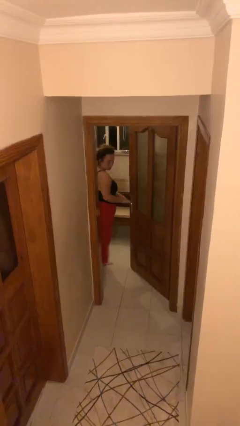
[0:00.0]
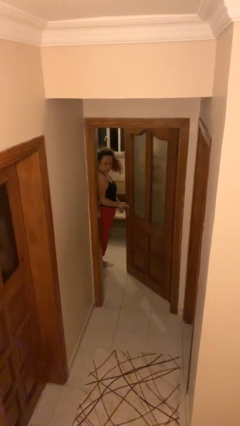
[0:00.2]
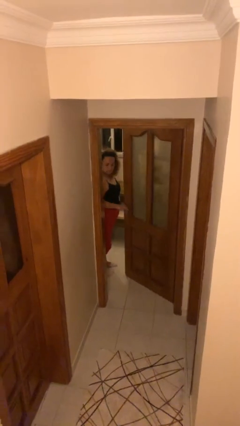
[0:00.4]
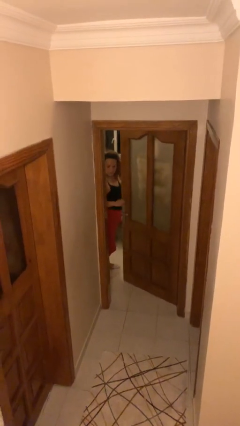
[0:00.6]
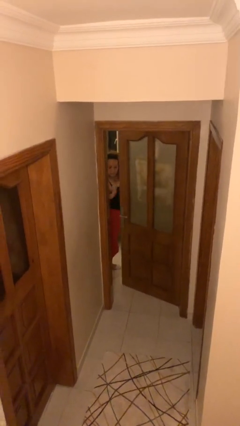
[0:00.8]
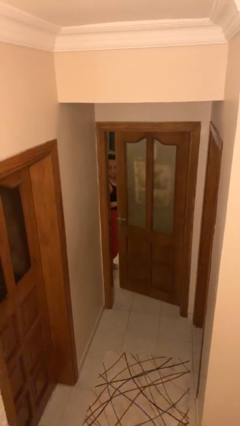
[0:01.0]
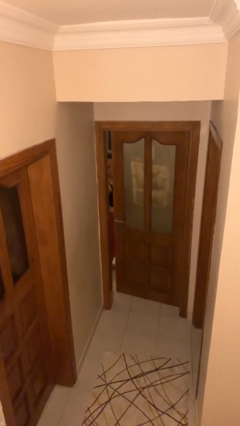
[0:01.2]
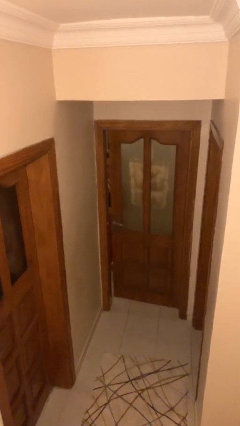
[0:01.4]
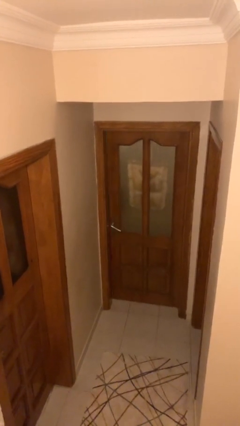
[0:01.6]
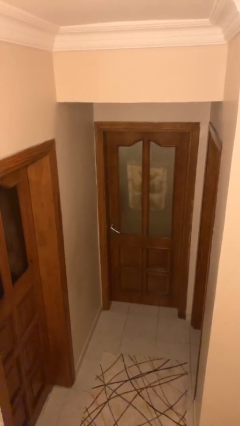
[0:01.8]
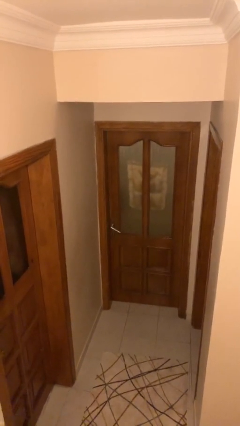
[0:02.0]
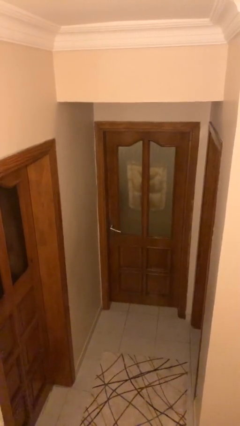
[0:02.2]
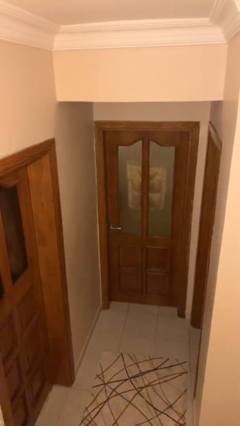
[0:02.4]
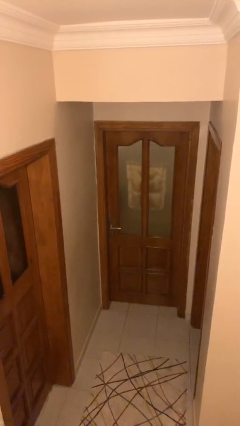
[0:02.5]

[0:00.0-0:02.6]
person closes facility door

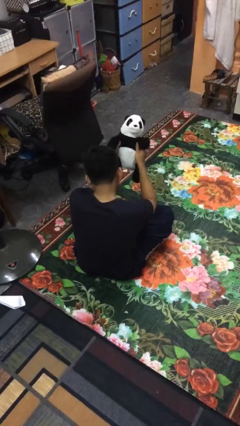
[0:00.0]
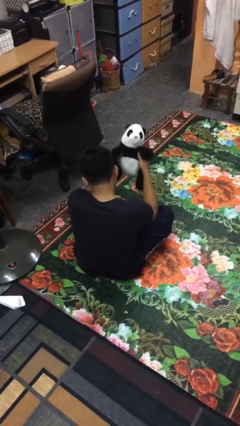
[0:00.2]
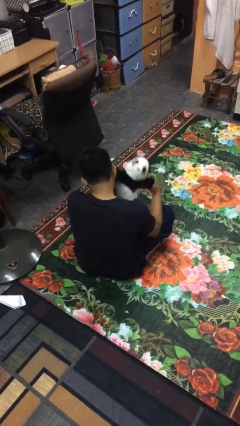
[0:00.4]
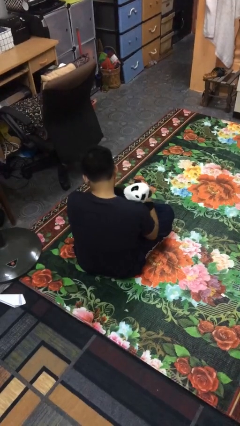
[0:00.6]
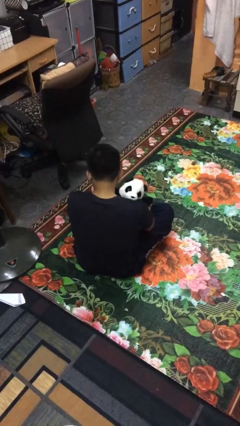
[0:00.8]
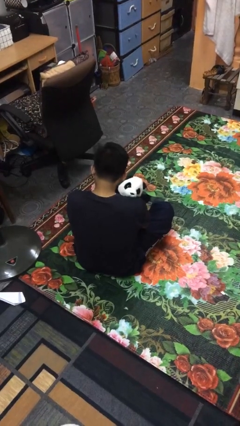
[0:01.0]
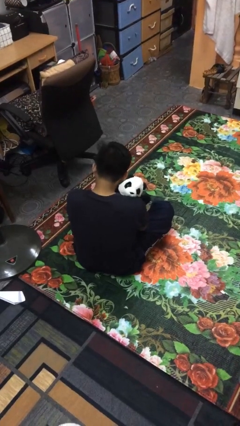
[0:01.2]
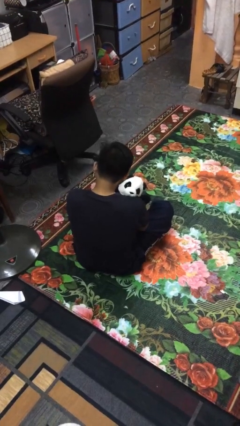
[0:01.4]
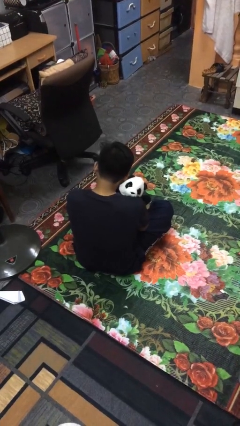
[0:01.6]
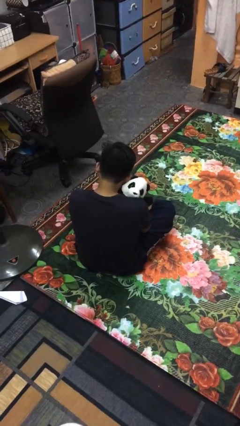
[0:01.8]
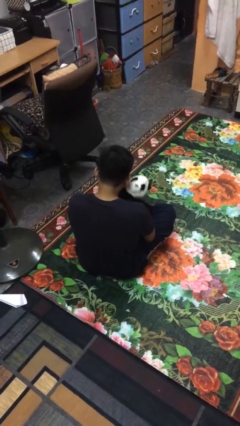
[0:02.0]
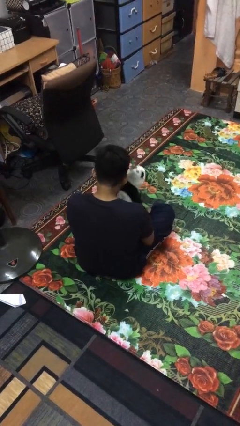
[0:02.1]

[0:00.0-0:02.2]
person hugs stuffed animal

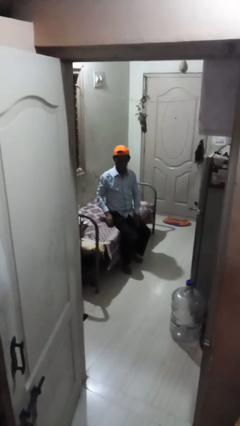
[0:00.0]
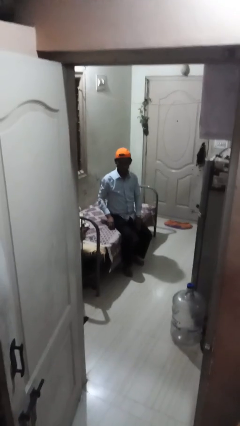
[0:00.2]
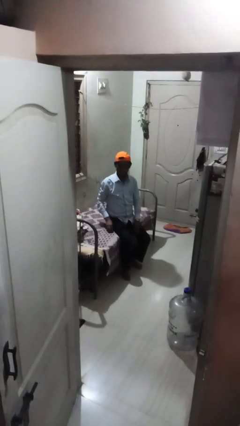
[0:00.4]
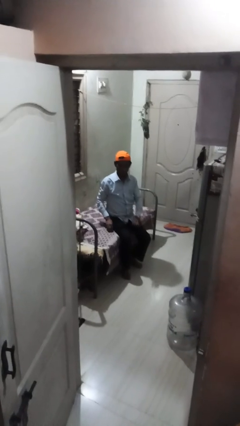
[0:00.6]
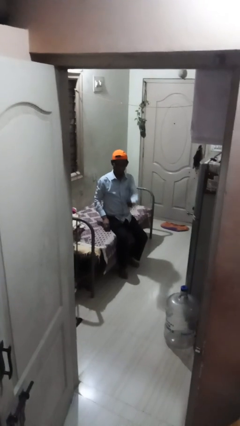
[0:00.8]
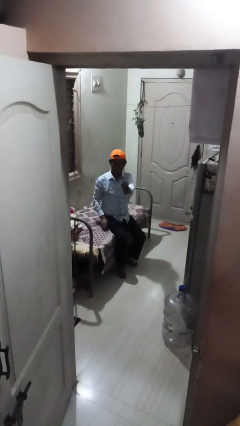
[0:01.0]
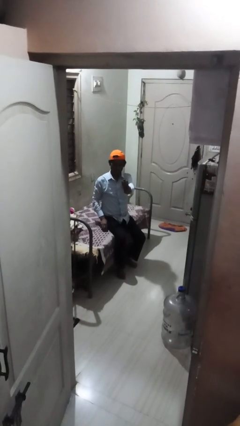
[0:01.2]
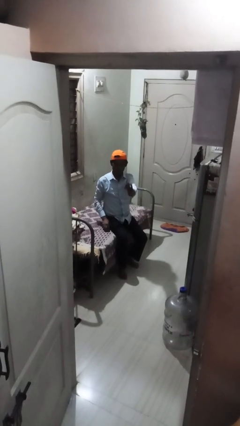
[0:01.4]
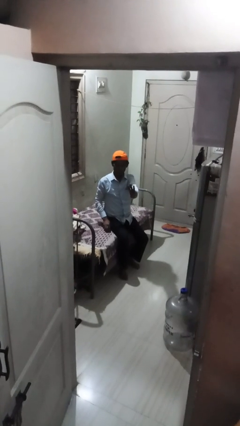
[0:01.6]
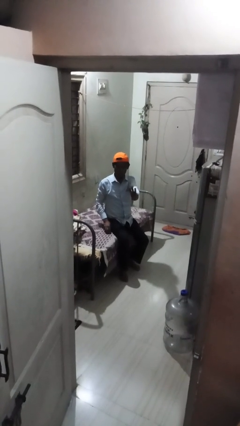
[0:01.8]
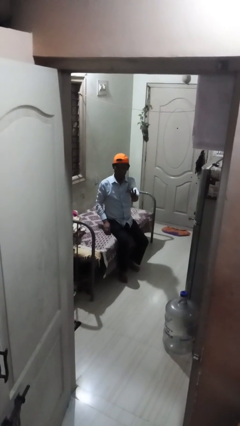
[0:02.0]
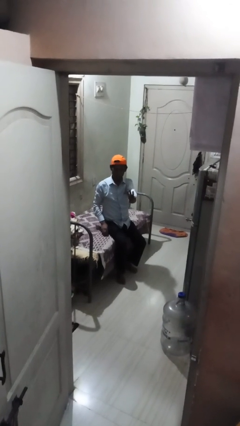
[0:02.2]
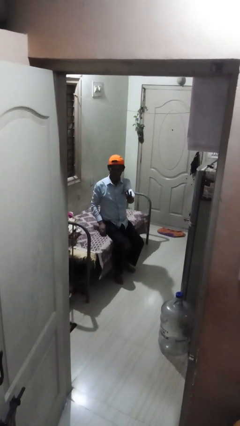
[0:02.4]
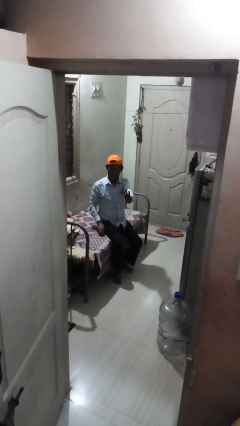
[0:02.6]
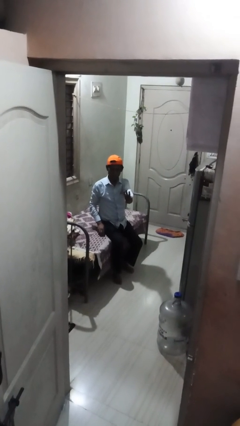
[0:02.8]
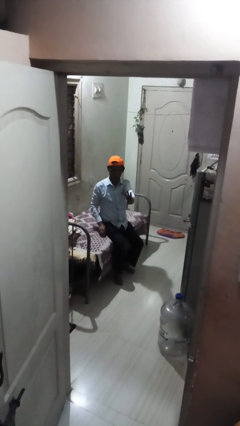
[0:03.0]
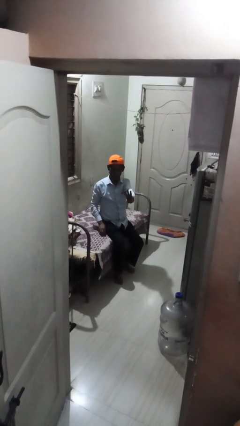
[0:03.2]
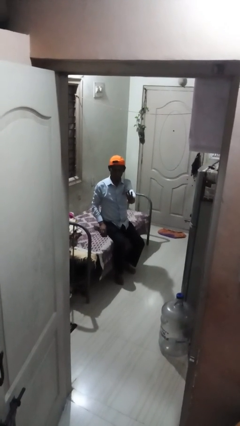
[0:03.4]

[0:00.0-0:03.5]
person gestures number three

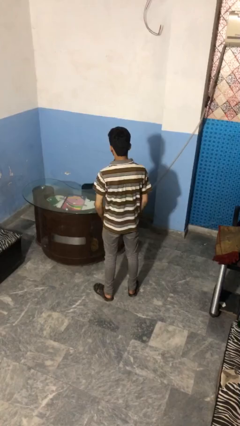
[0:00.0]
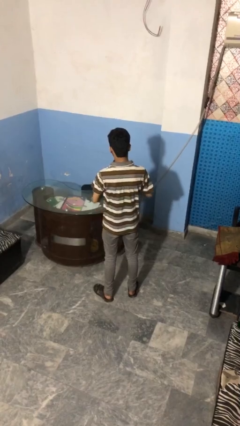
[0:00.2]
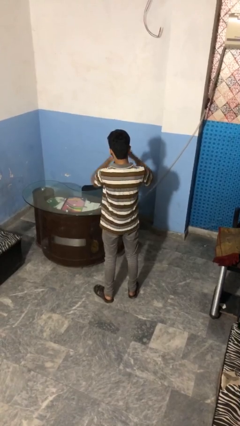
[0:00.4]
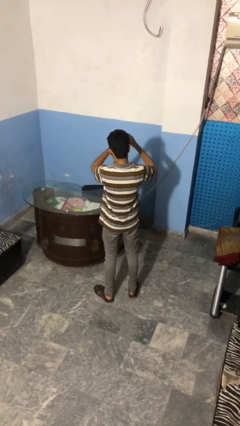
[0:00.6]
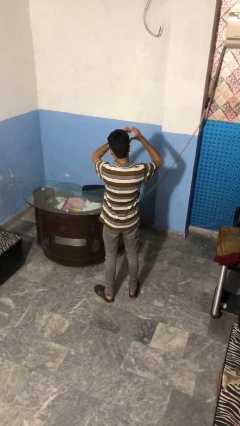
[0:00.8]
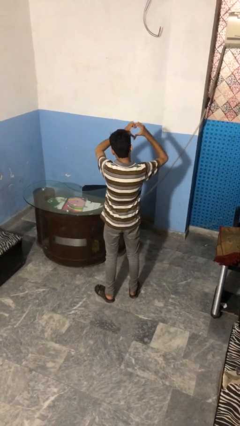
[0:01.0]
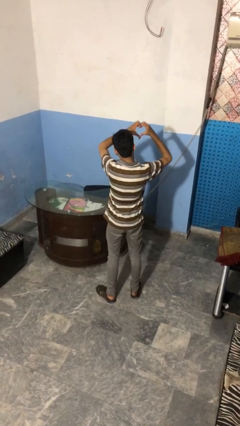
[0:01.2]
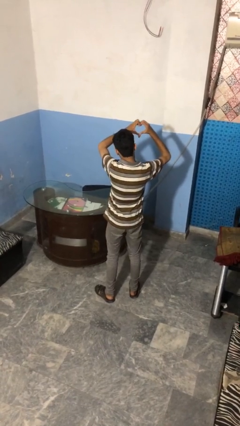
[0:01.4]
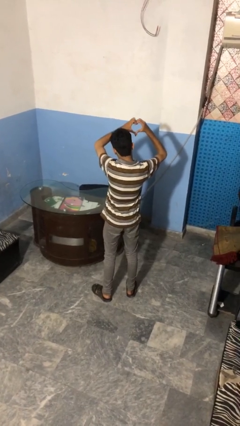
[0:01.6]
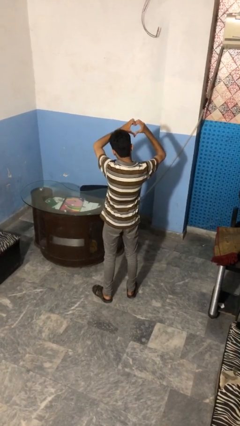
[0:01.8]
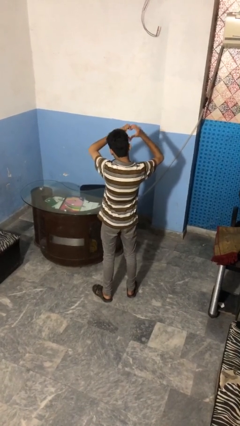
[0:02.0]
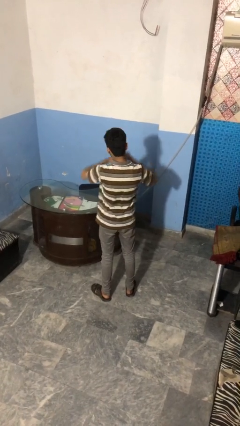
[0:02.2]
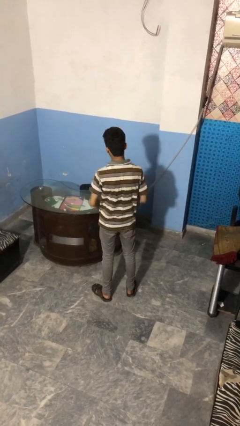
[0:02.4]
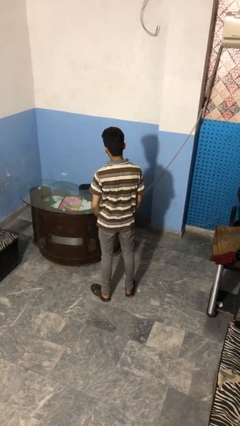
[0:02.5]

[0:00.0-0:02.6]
person gestures heart

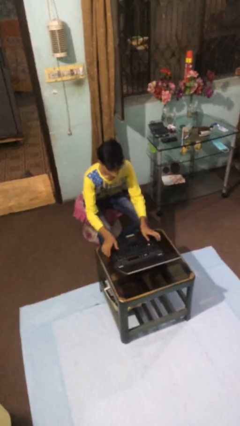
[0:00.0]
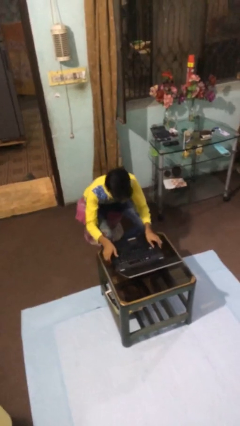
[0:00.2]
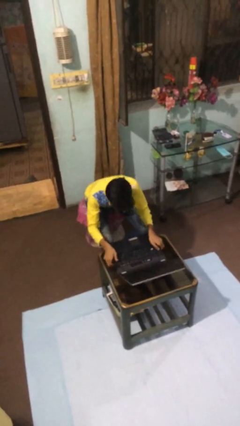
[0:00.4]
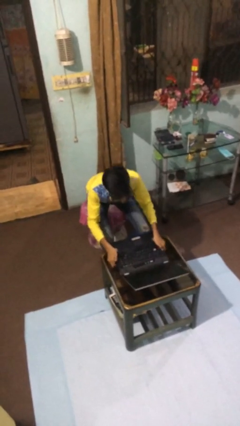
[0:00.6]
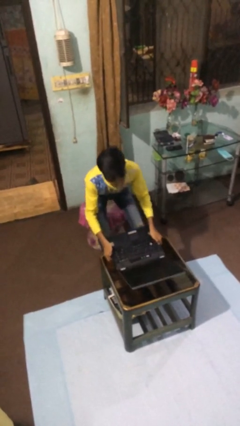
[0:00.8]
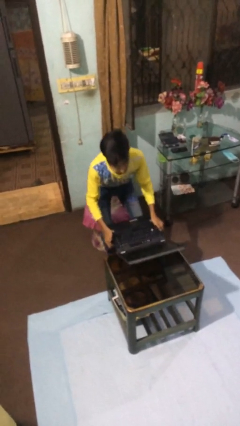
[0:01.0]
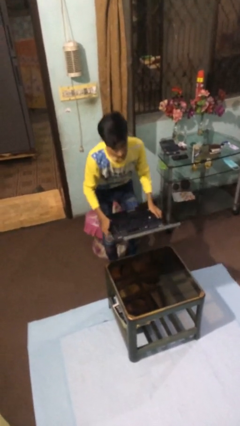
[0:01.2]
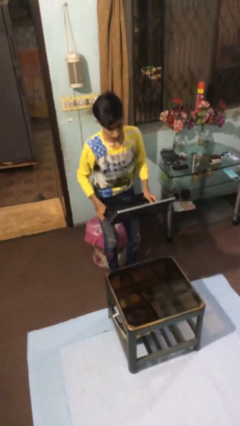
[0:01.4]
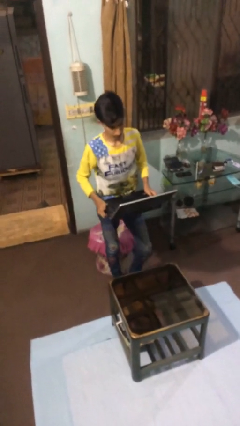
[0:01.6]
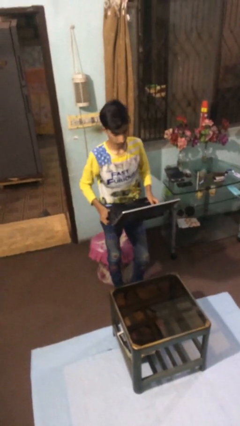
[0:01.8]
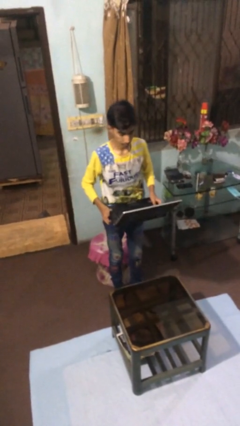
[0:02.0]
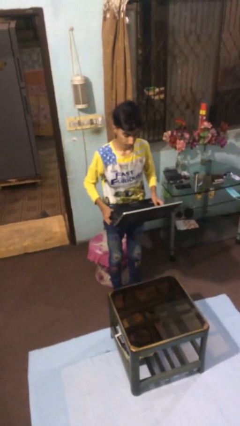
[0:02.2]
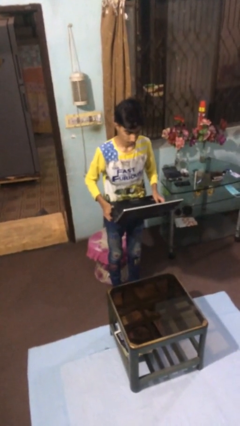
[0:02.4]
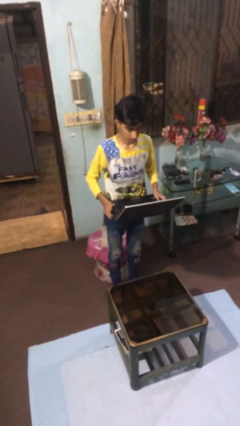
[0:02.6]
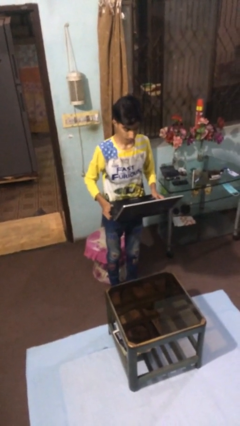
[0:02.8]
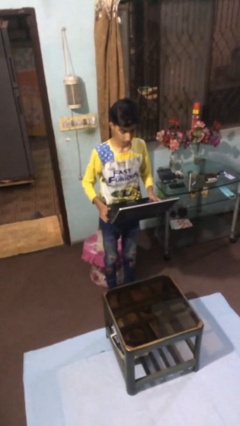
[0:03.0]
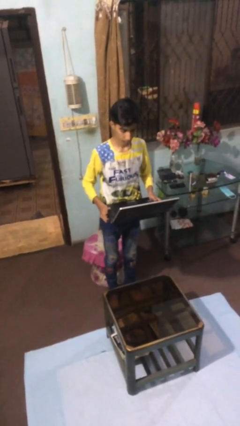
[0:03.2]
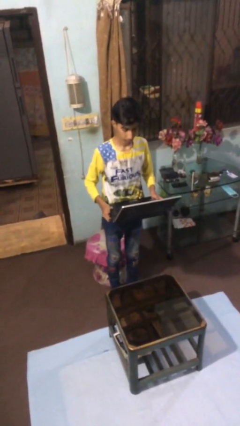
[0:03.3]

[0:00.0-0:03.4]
person stands up

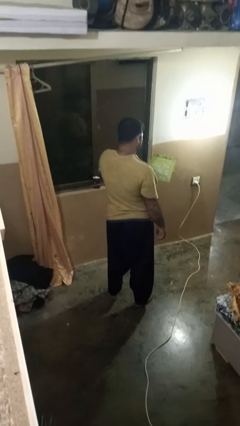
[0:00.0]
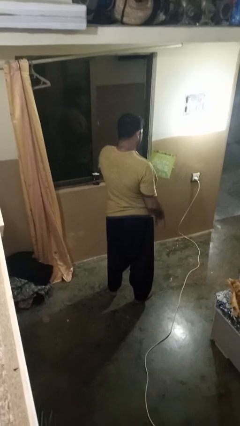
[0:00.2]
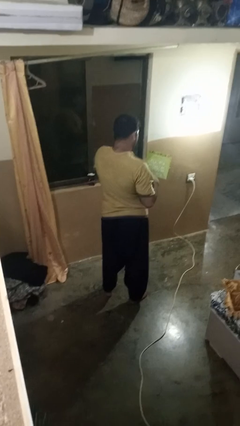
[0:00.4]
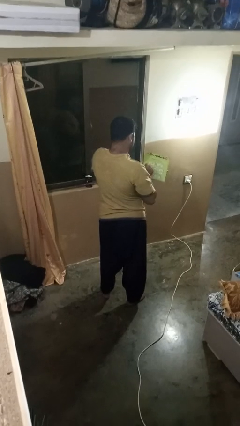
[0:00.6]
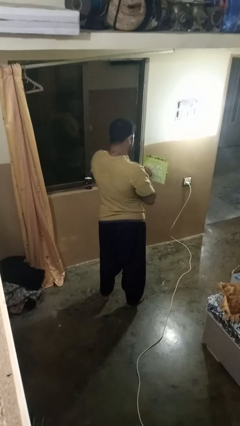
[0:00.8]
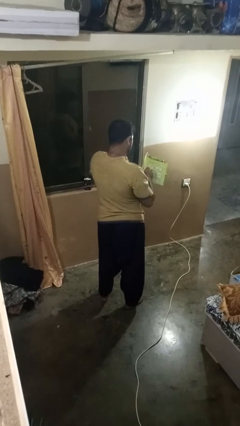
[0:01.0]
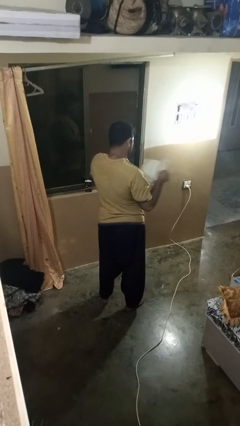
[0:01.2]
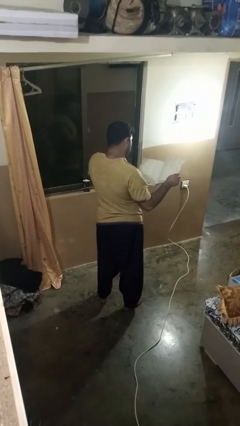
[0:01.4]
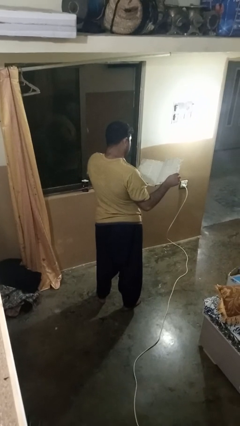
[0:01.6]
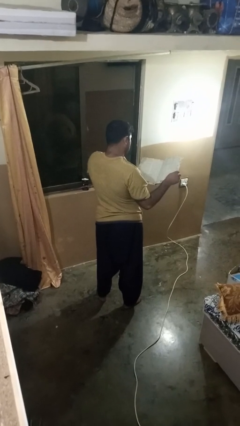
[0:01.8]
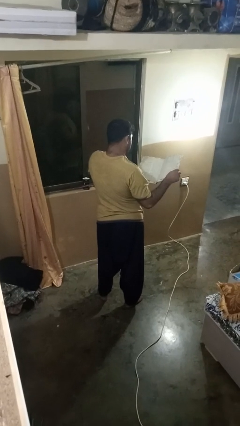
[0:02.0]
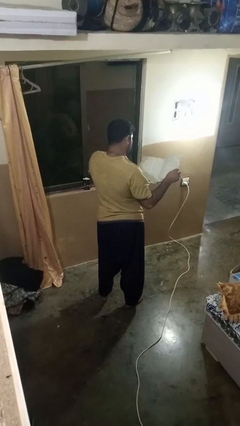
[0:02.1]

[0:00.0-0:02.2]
person reads magazine

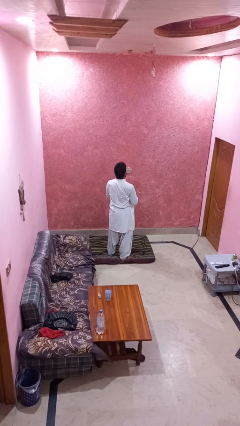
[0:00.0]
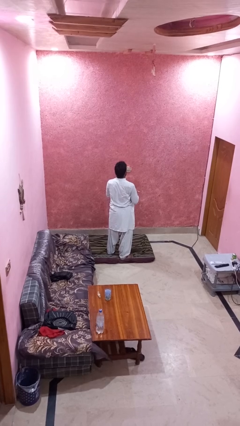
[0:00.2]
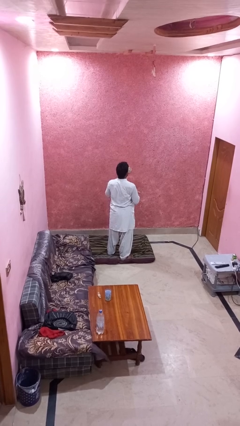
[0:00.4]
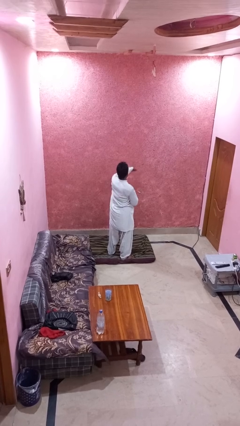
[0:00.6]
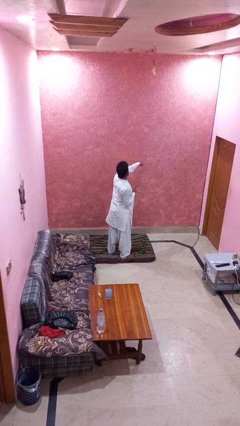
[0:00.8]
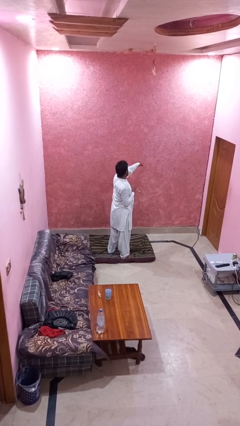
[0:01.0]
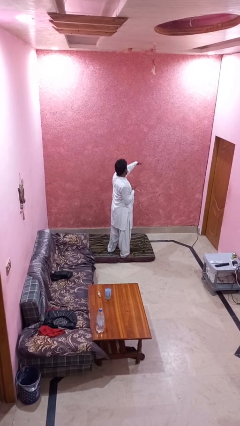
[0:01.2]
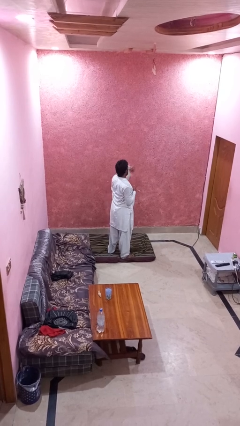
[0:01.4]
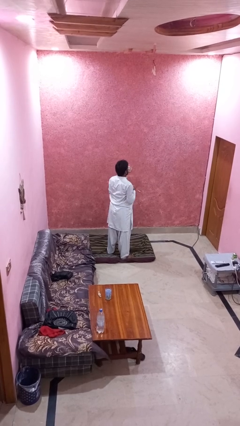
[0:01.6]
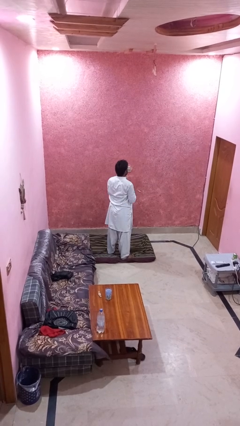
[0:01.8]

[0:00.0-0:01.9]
person punches
